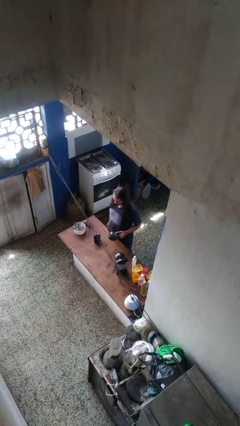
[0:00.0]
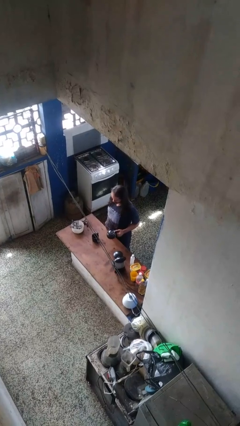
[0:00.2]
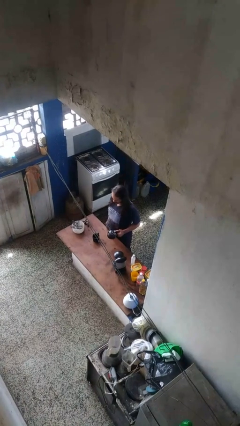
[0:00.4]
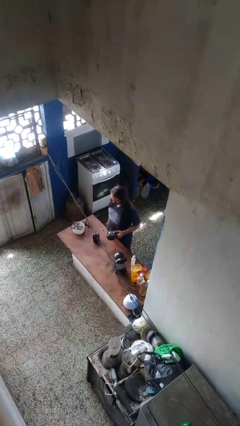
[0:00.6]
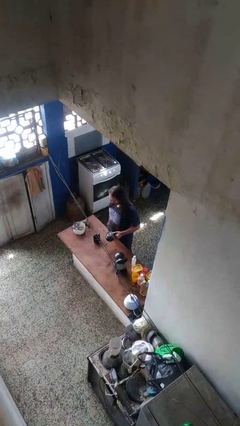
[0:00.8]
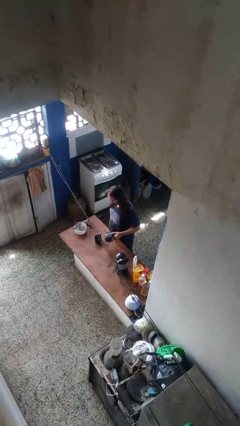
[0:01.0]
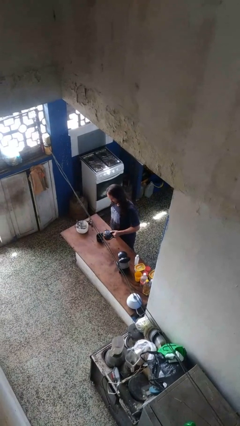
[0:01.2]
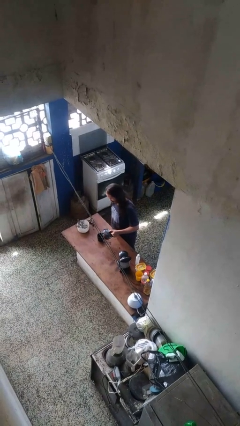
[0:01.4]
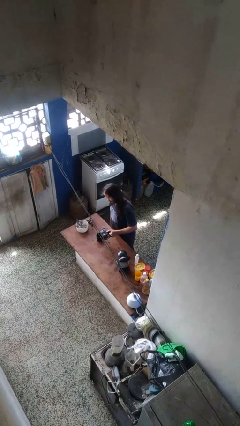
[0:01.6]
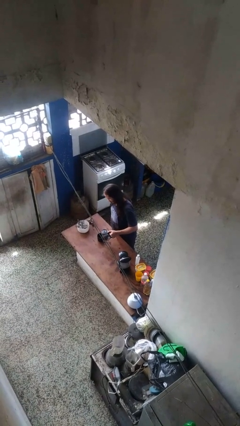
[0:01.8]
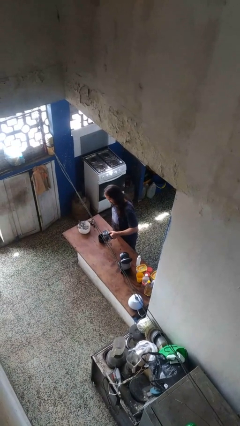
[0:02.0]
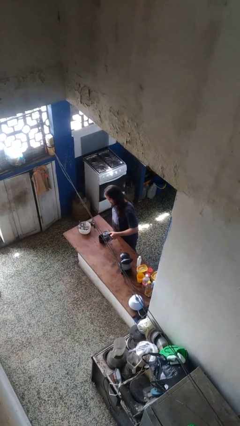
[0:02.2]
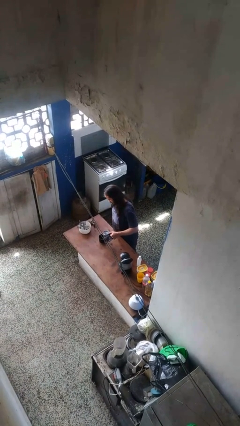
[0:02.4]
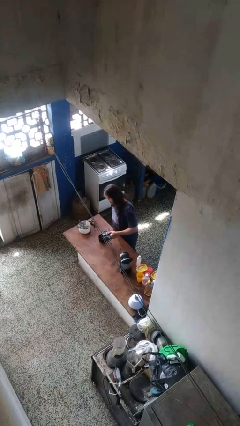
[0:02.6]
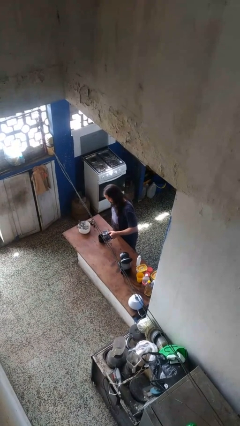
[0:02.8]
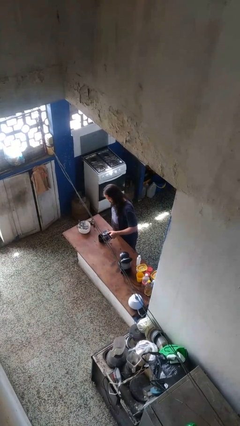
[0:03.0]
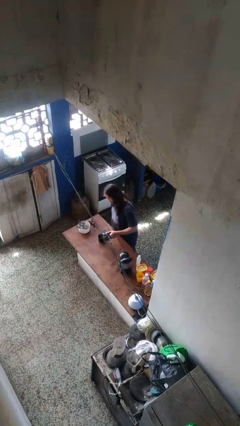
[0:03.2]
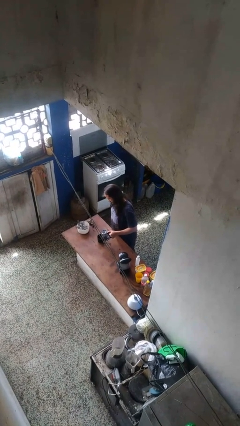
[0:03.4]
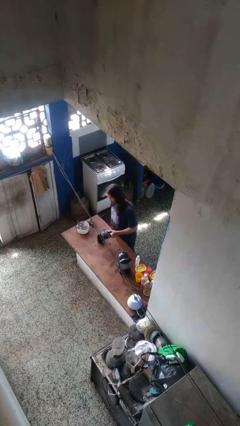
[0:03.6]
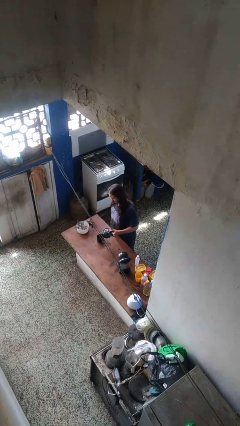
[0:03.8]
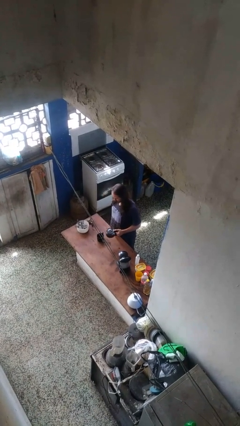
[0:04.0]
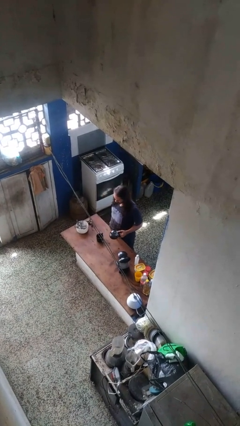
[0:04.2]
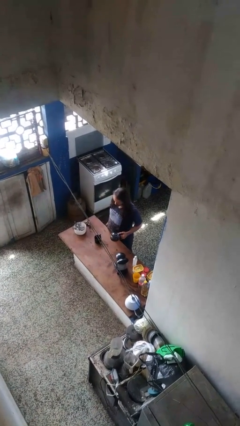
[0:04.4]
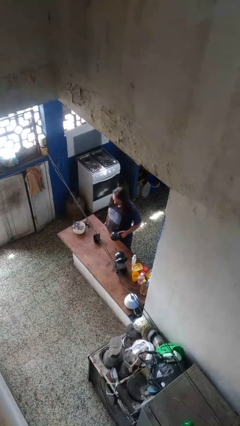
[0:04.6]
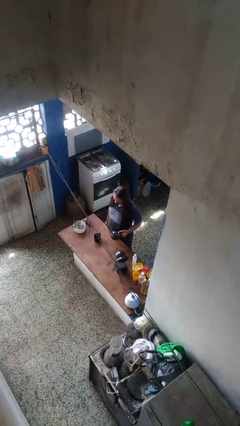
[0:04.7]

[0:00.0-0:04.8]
person pours coffee into mug

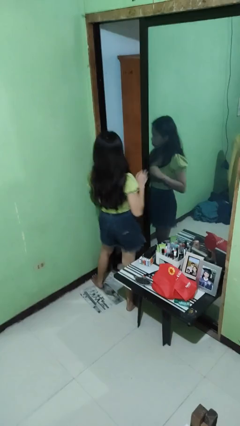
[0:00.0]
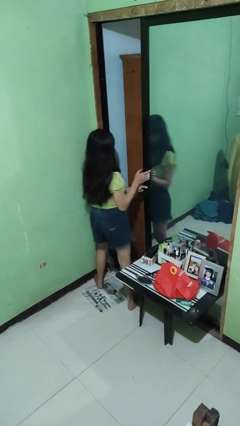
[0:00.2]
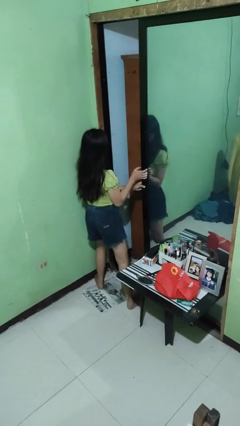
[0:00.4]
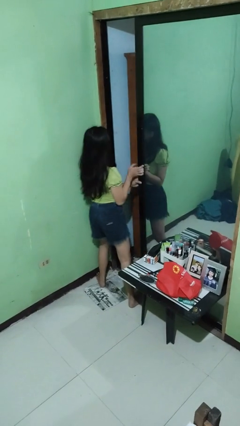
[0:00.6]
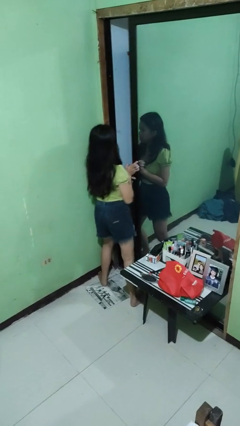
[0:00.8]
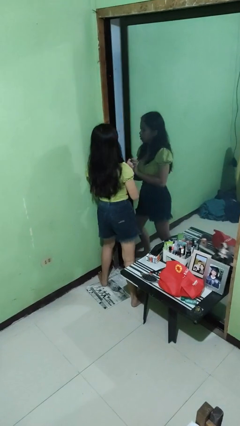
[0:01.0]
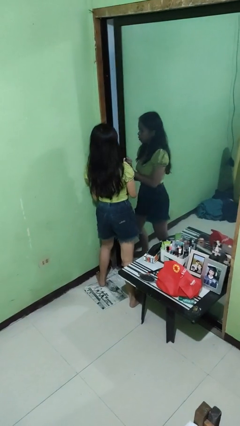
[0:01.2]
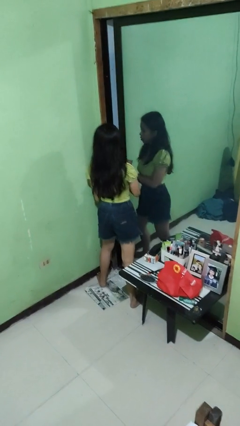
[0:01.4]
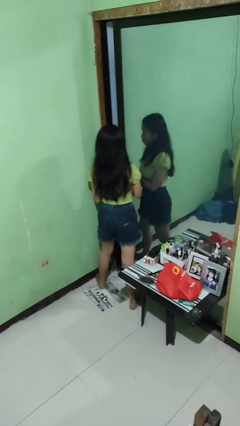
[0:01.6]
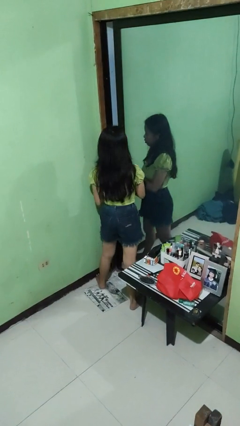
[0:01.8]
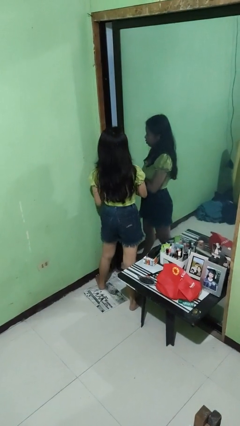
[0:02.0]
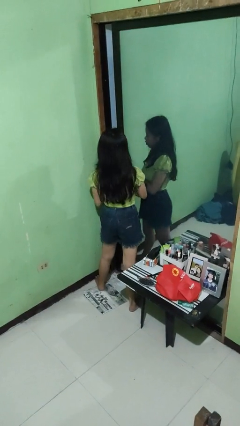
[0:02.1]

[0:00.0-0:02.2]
person closes sliding door

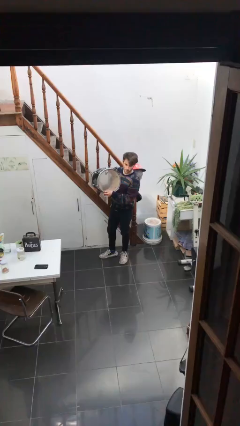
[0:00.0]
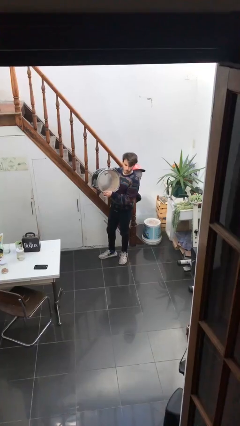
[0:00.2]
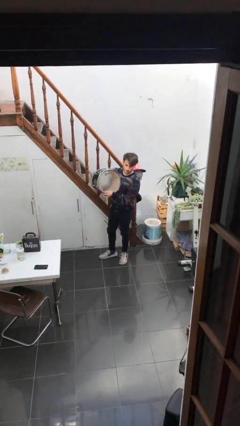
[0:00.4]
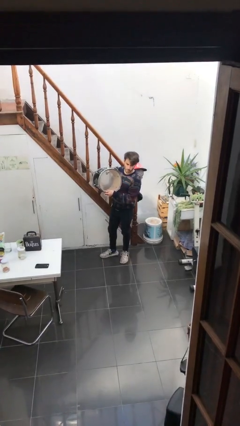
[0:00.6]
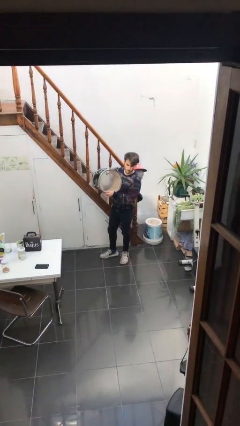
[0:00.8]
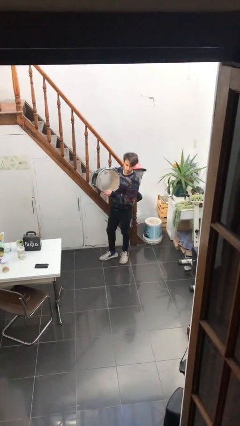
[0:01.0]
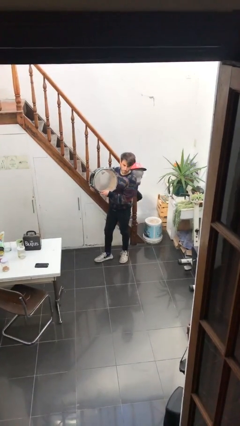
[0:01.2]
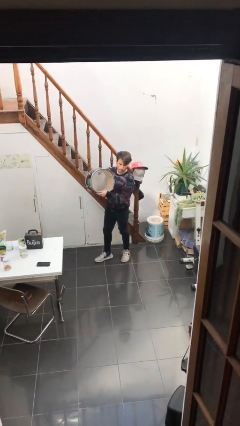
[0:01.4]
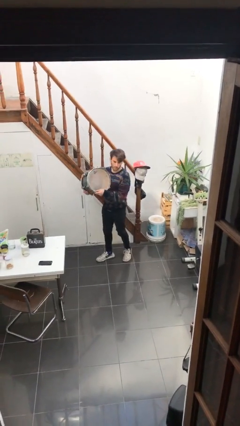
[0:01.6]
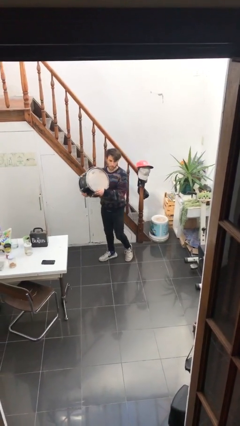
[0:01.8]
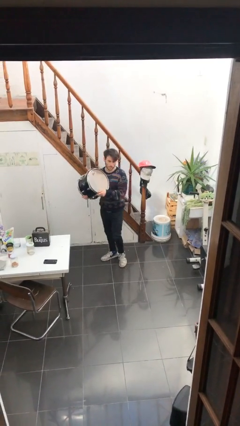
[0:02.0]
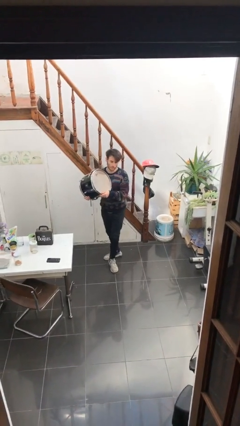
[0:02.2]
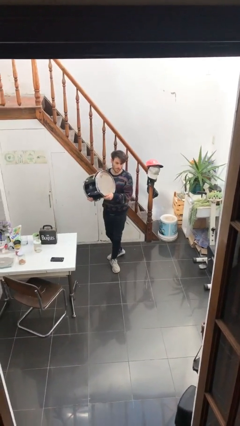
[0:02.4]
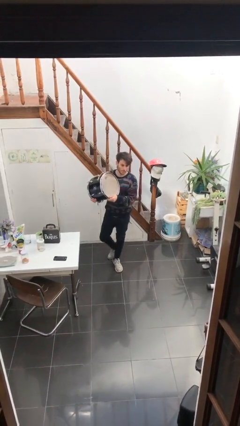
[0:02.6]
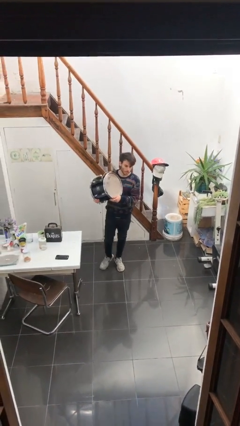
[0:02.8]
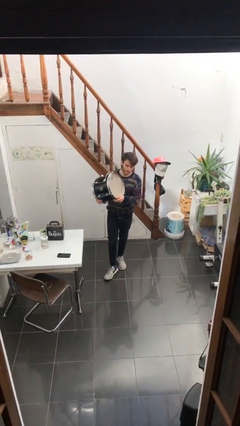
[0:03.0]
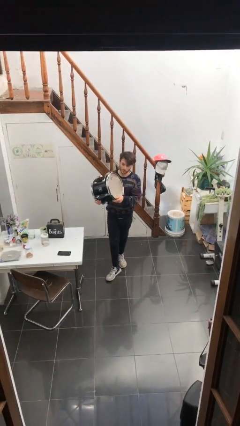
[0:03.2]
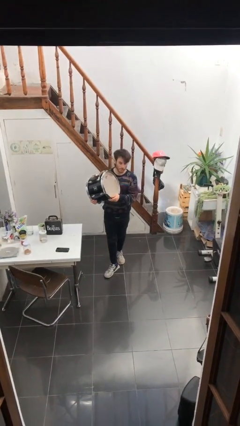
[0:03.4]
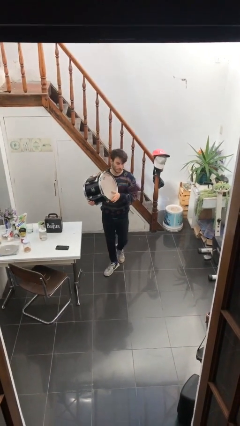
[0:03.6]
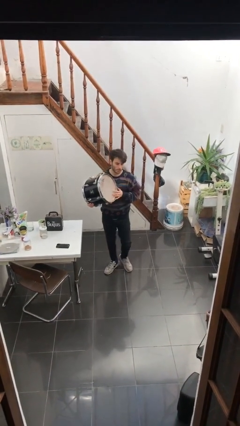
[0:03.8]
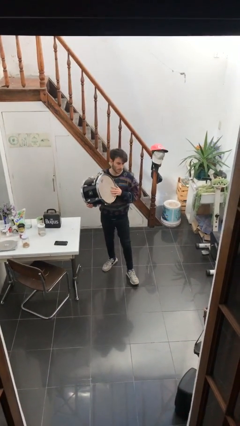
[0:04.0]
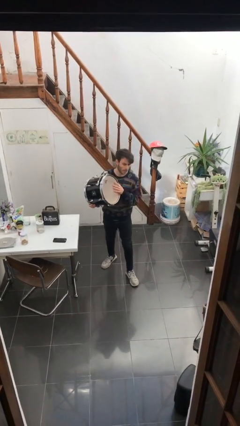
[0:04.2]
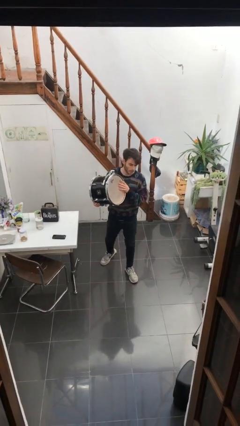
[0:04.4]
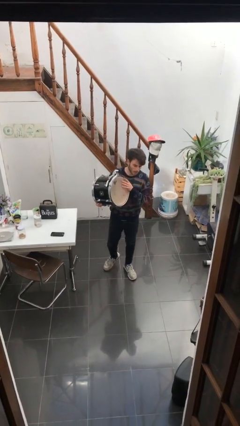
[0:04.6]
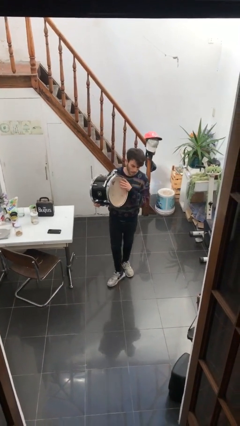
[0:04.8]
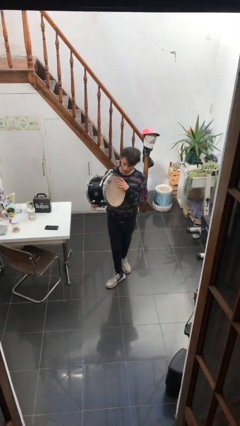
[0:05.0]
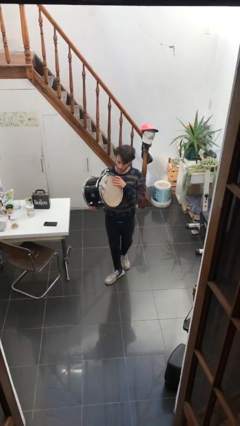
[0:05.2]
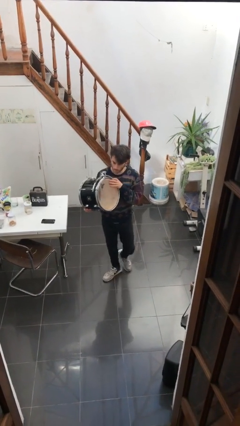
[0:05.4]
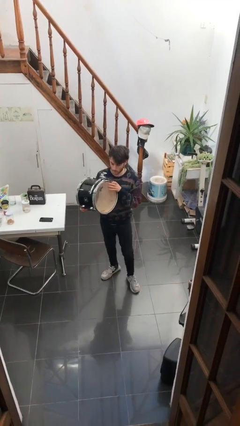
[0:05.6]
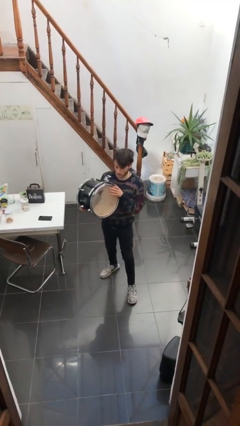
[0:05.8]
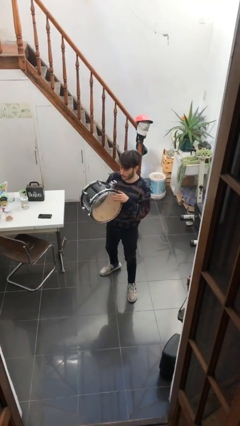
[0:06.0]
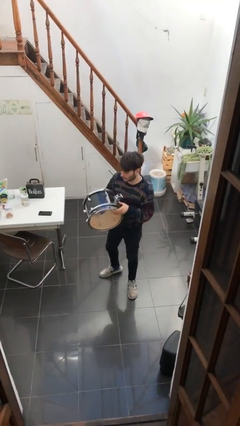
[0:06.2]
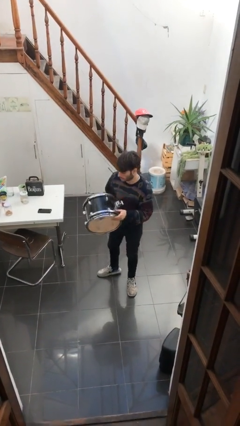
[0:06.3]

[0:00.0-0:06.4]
person carries heavy object

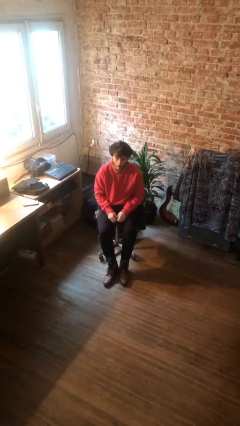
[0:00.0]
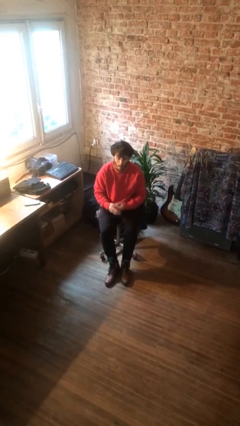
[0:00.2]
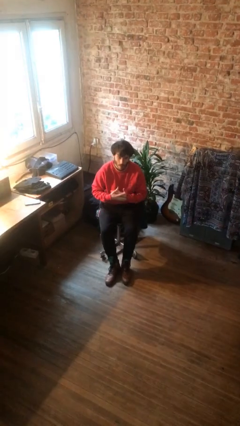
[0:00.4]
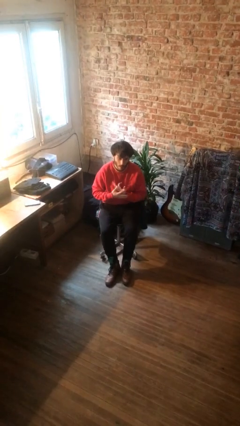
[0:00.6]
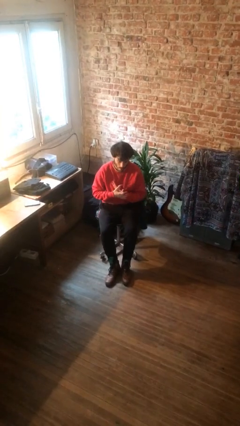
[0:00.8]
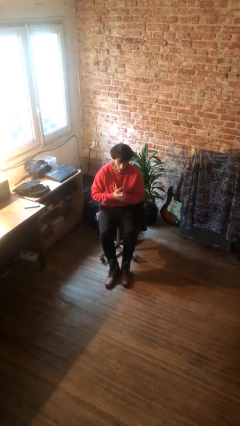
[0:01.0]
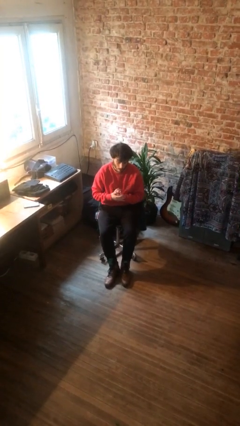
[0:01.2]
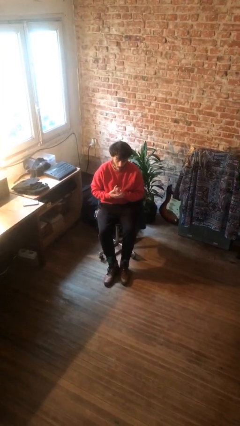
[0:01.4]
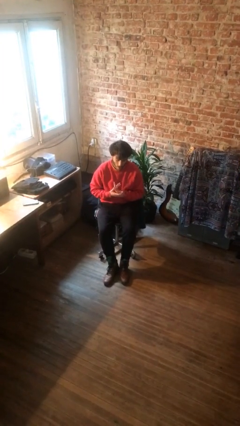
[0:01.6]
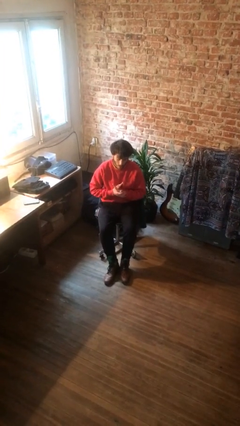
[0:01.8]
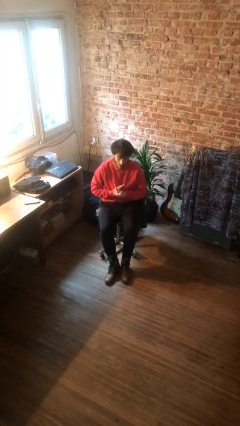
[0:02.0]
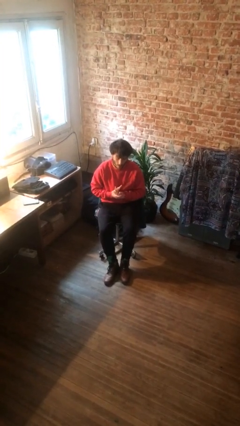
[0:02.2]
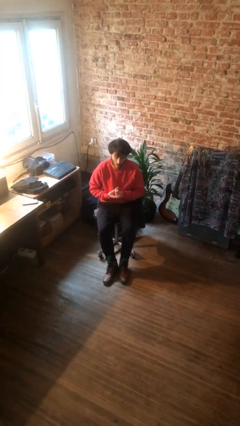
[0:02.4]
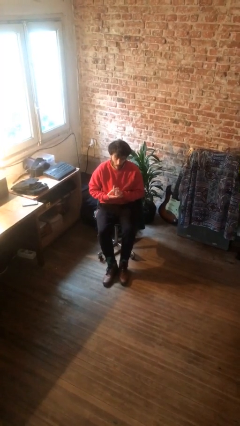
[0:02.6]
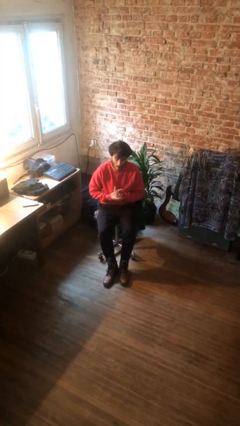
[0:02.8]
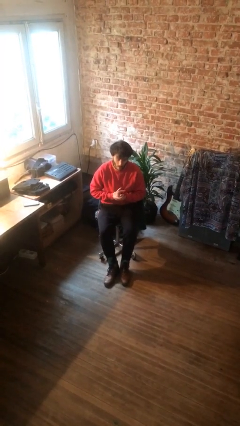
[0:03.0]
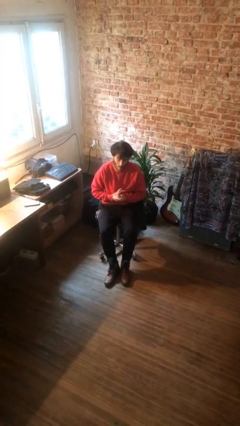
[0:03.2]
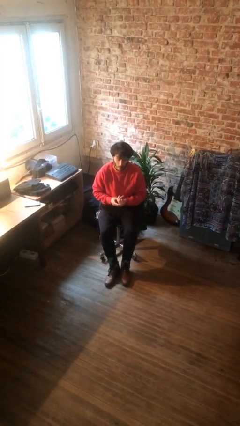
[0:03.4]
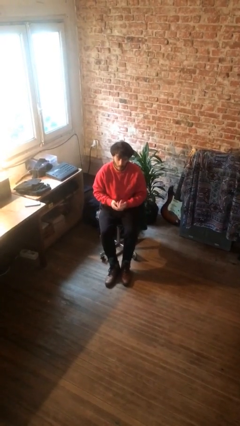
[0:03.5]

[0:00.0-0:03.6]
person cracks knuckles

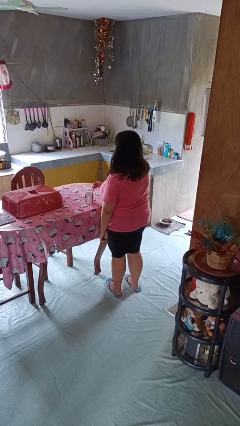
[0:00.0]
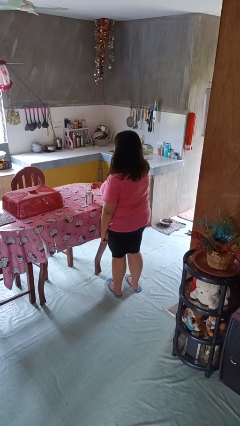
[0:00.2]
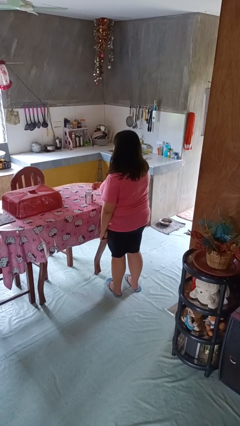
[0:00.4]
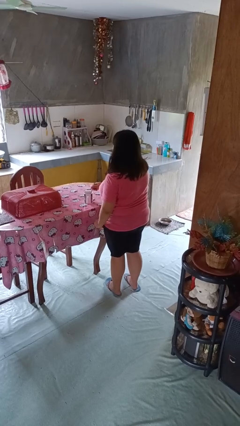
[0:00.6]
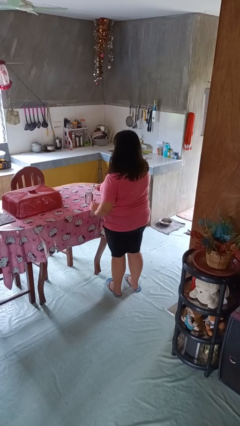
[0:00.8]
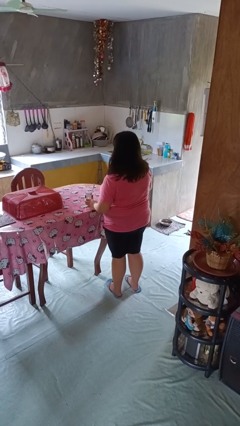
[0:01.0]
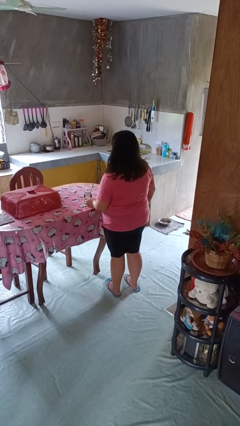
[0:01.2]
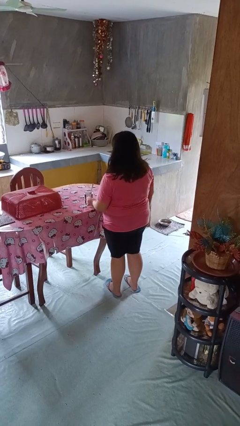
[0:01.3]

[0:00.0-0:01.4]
person stirs mug
